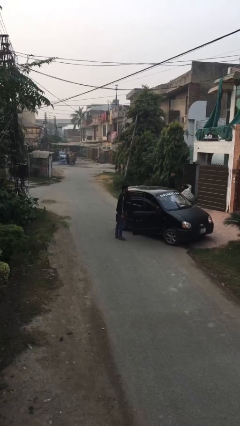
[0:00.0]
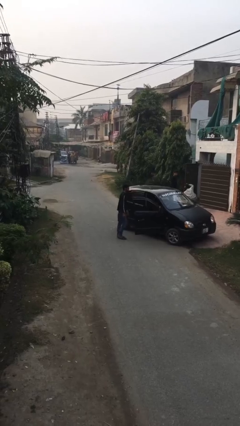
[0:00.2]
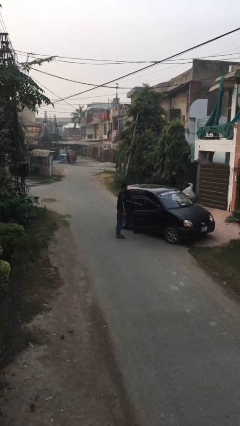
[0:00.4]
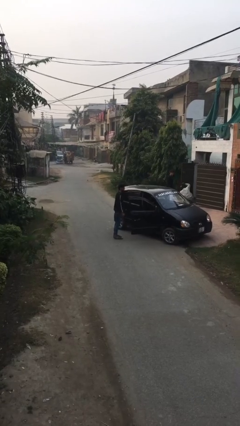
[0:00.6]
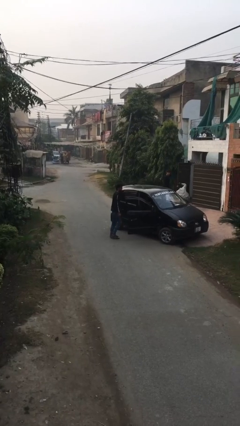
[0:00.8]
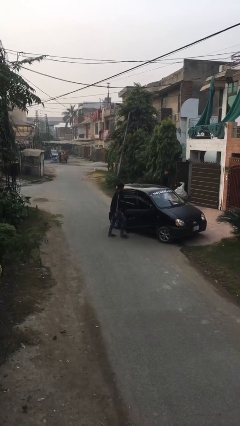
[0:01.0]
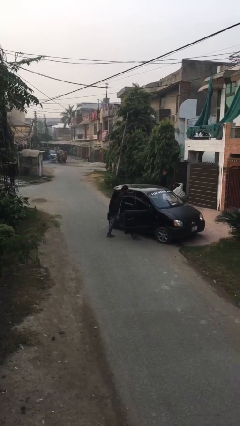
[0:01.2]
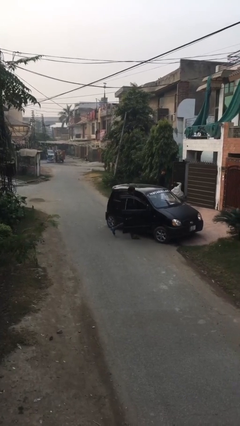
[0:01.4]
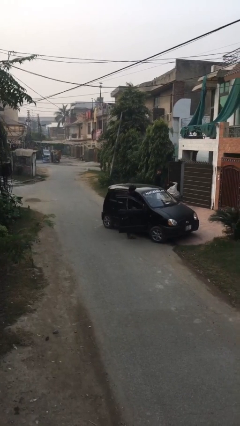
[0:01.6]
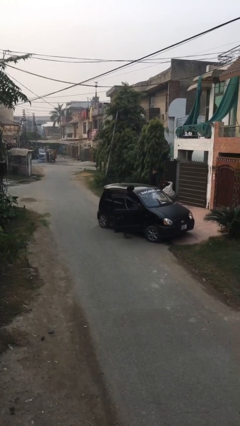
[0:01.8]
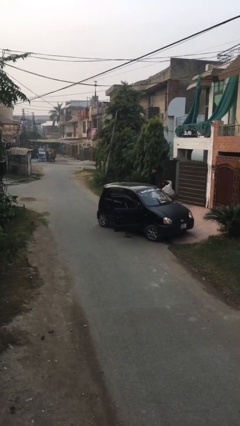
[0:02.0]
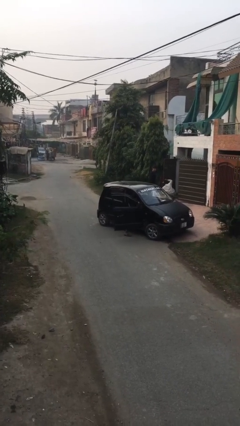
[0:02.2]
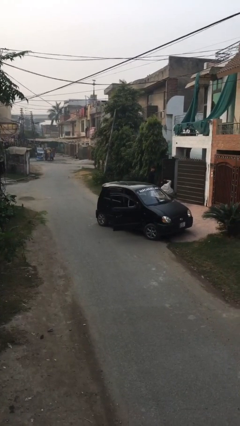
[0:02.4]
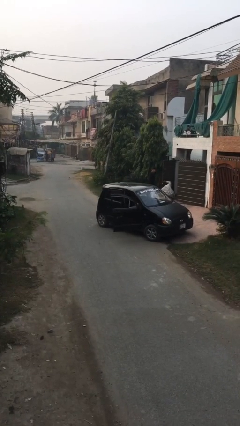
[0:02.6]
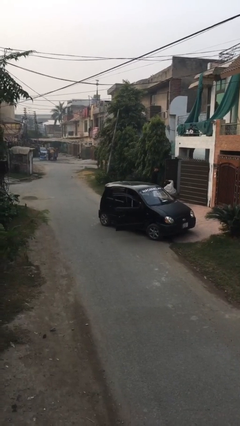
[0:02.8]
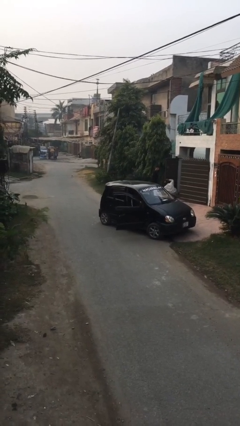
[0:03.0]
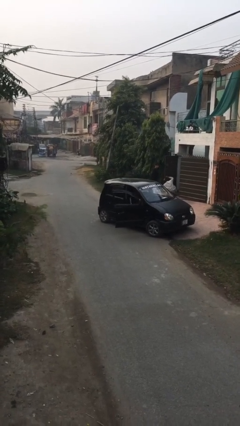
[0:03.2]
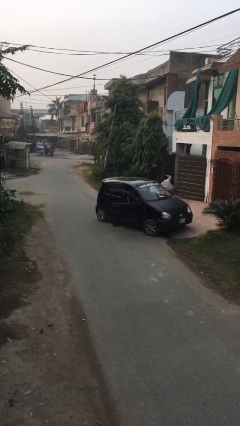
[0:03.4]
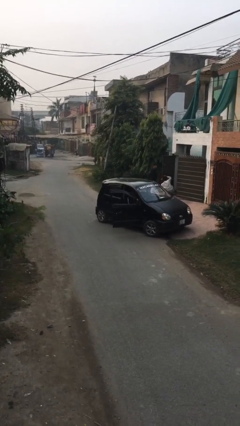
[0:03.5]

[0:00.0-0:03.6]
person enters car

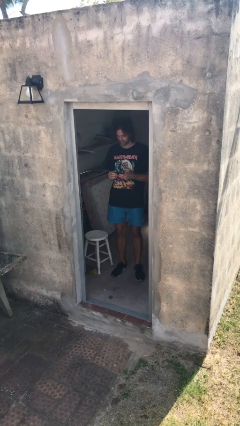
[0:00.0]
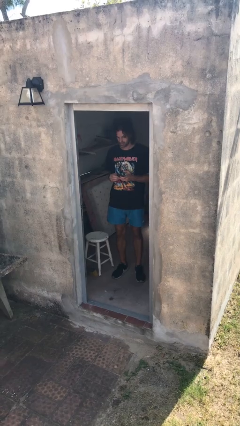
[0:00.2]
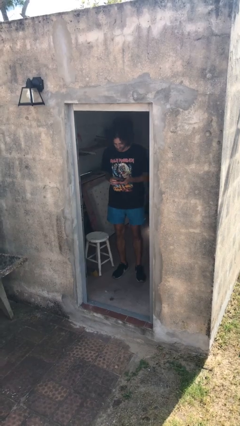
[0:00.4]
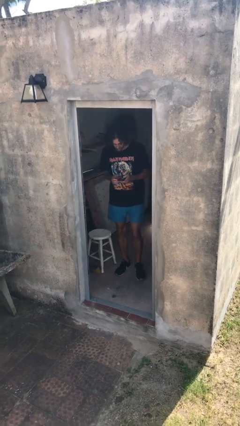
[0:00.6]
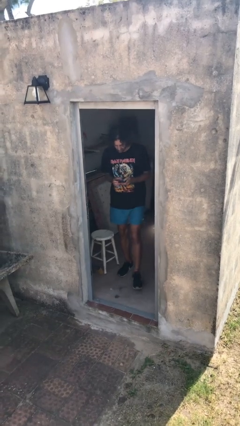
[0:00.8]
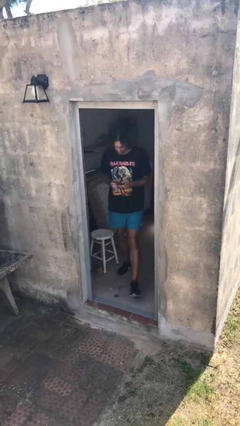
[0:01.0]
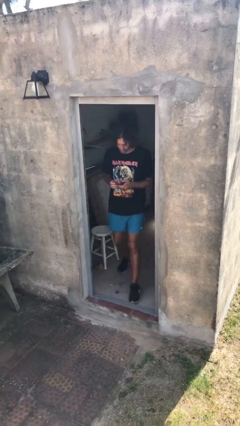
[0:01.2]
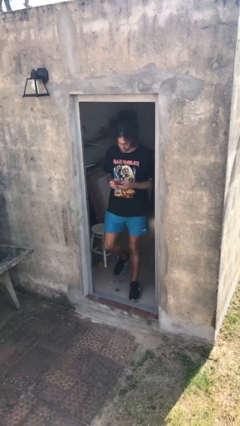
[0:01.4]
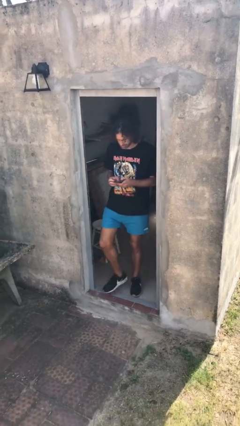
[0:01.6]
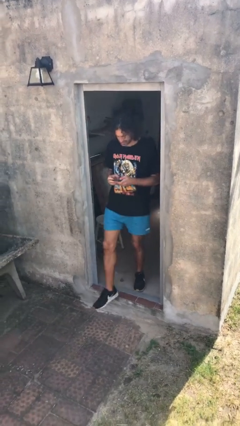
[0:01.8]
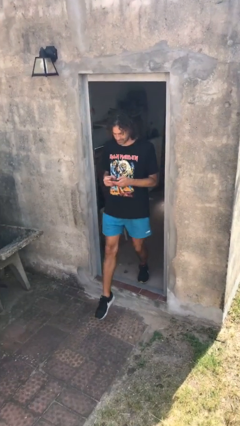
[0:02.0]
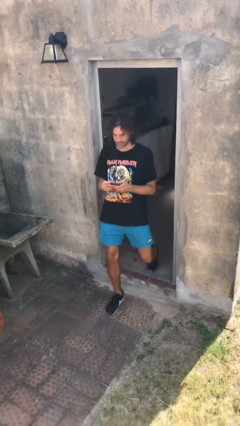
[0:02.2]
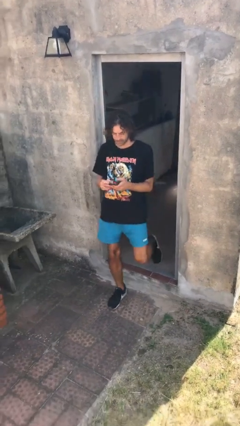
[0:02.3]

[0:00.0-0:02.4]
person enters scene through structure

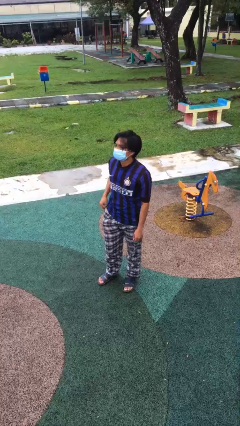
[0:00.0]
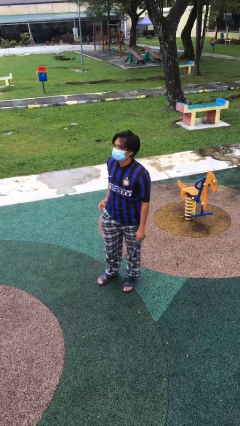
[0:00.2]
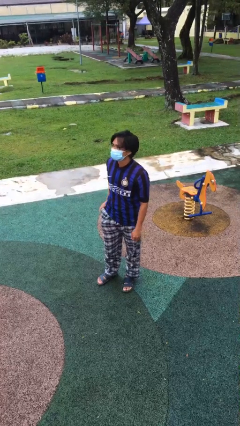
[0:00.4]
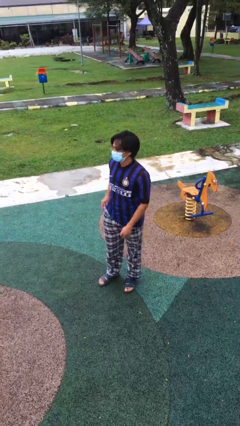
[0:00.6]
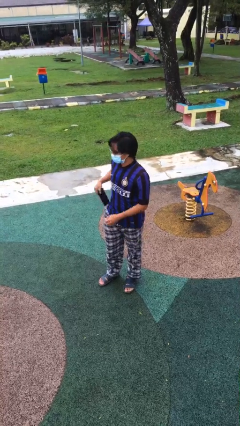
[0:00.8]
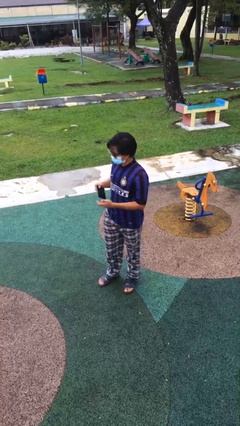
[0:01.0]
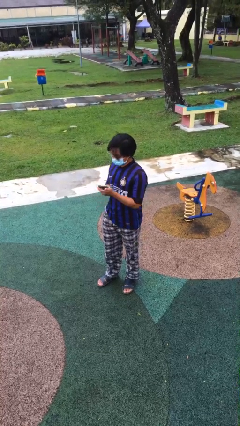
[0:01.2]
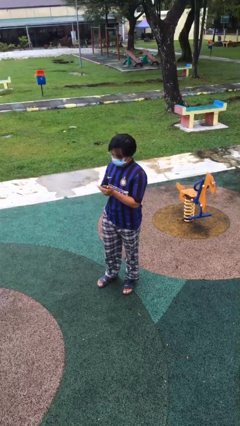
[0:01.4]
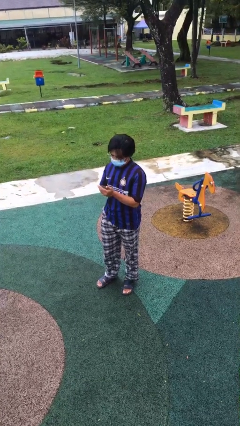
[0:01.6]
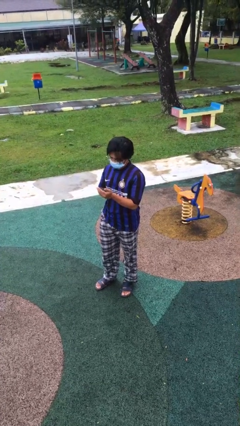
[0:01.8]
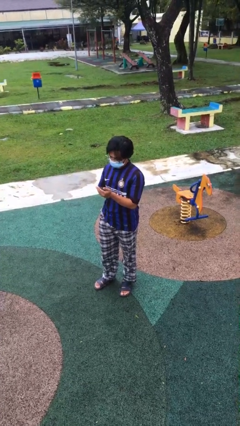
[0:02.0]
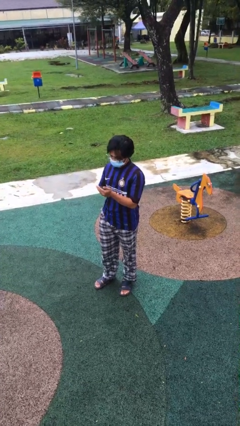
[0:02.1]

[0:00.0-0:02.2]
person takes phone from pocket

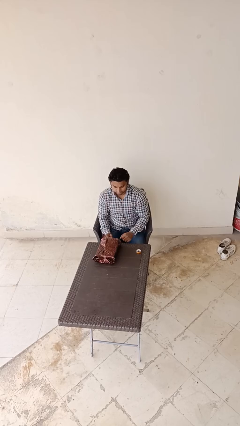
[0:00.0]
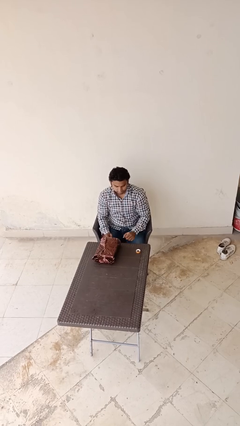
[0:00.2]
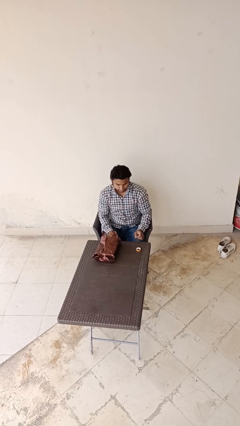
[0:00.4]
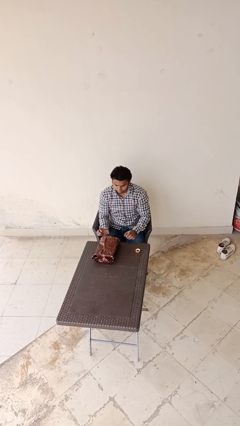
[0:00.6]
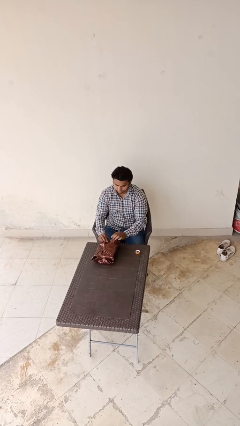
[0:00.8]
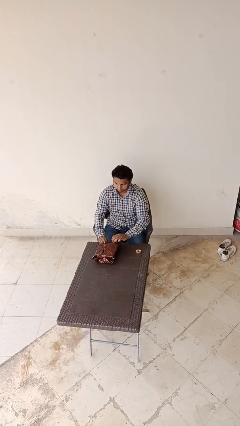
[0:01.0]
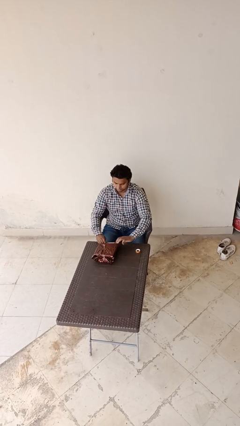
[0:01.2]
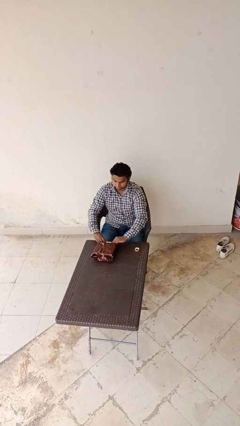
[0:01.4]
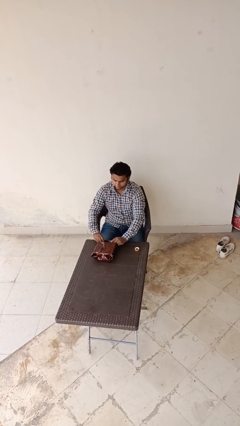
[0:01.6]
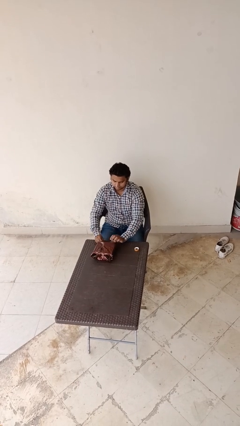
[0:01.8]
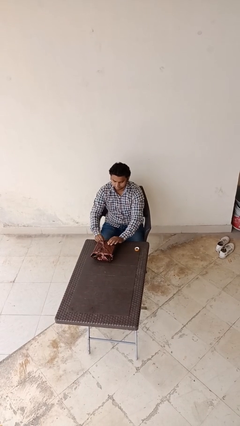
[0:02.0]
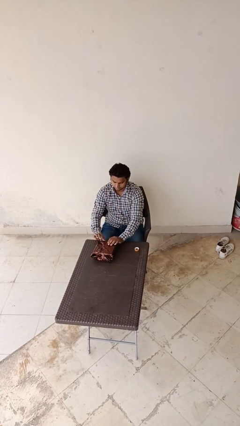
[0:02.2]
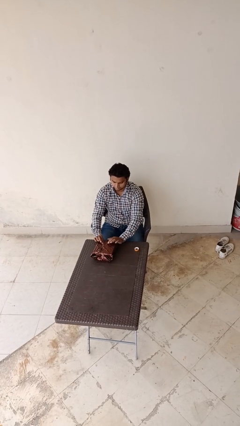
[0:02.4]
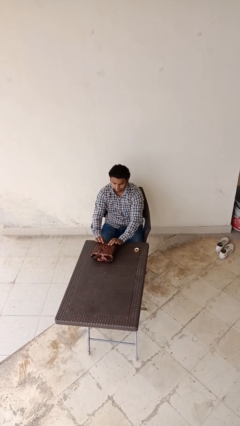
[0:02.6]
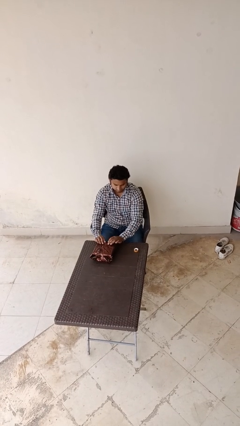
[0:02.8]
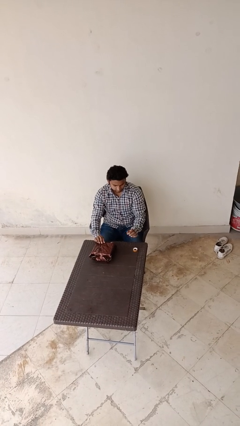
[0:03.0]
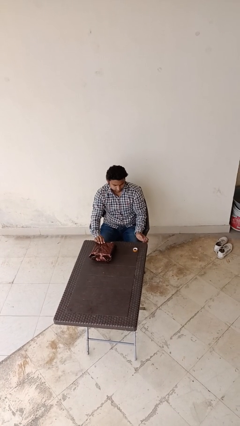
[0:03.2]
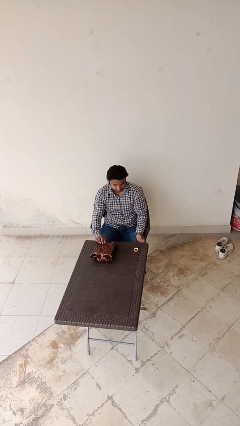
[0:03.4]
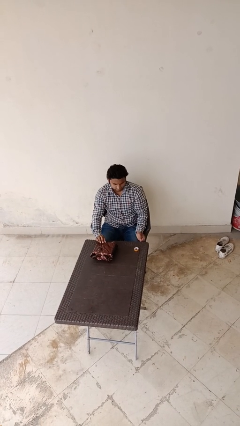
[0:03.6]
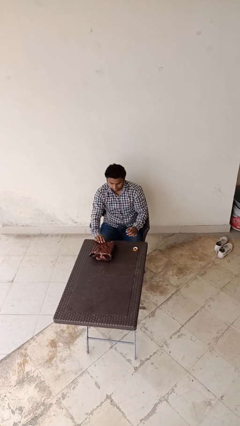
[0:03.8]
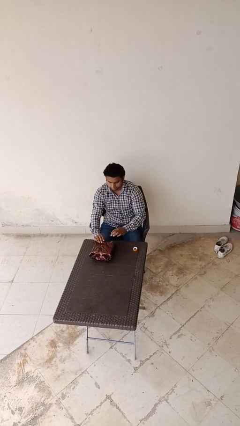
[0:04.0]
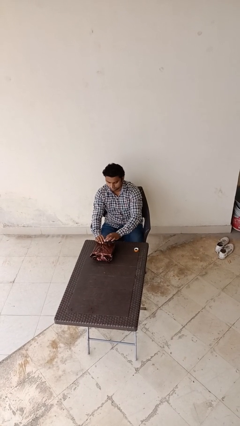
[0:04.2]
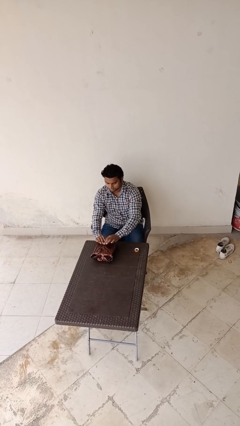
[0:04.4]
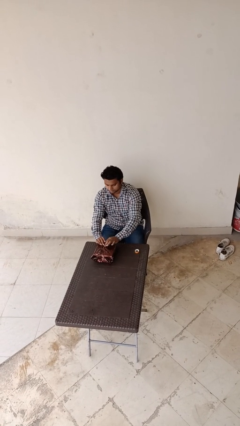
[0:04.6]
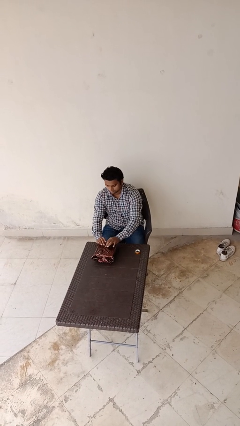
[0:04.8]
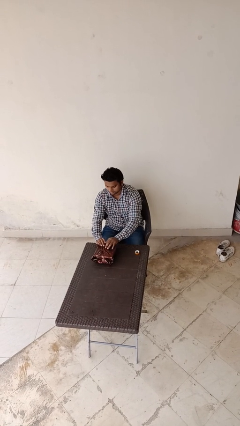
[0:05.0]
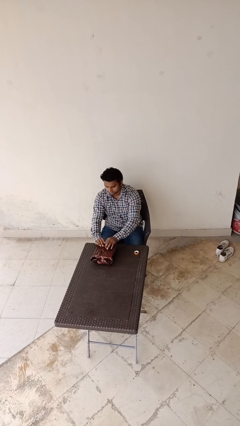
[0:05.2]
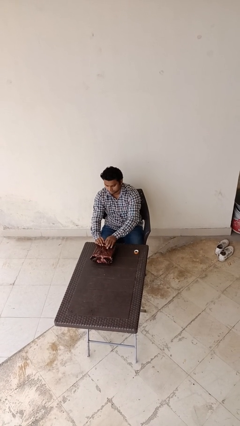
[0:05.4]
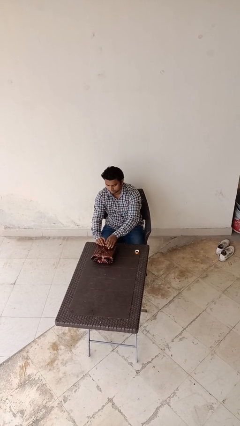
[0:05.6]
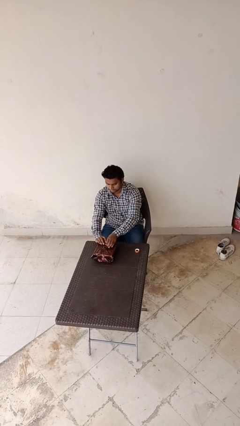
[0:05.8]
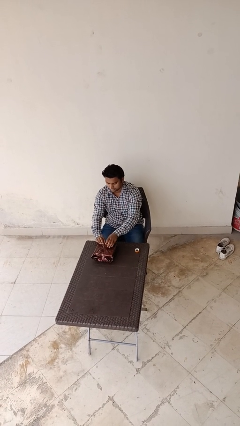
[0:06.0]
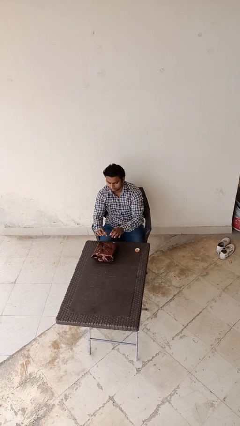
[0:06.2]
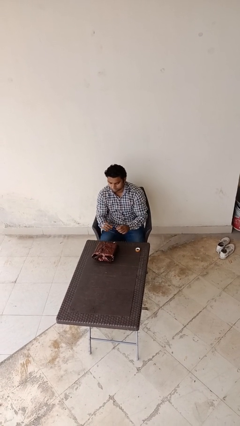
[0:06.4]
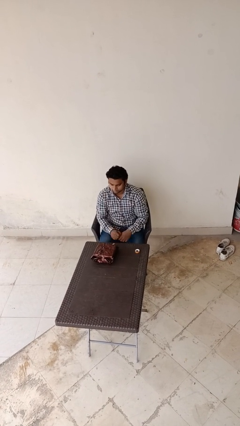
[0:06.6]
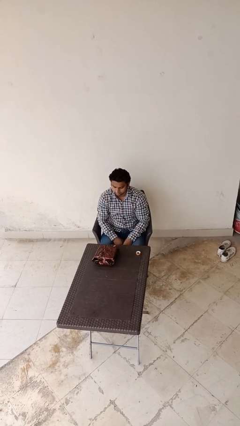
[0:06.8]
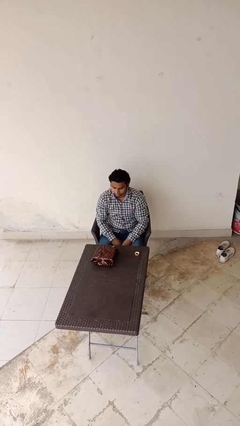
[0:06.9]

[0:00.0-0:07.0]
person wraps box

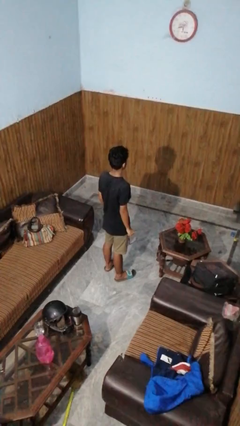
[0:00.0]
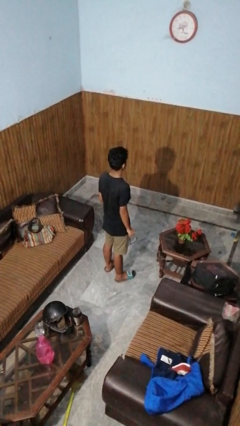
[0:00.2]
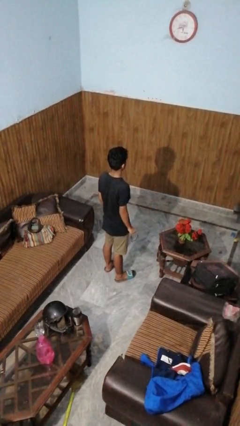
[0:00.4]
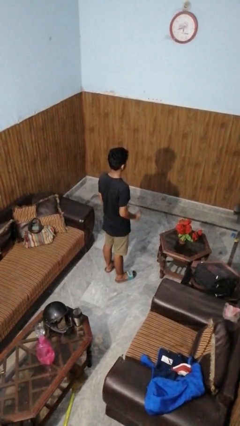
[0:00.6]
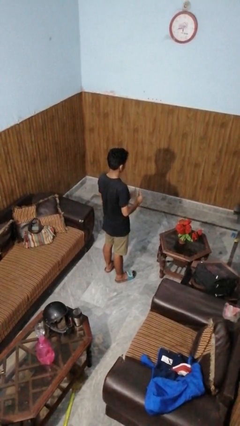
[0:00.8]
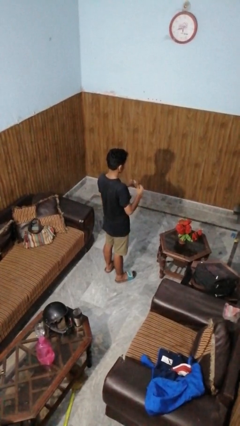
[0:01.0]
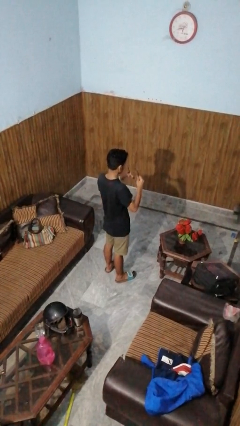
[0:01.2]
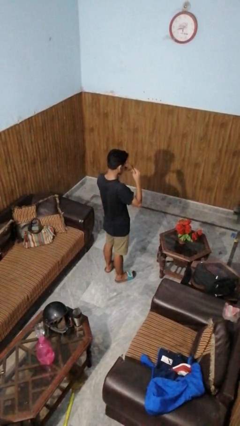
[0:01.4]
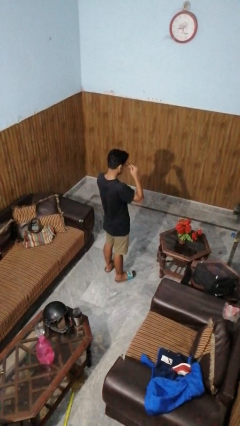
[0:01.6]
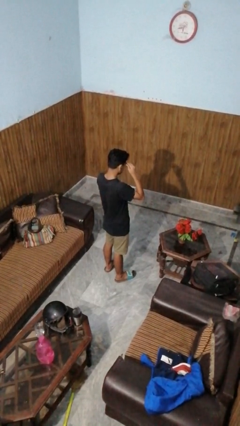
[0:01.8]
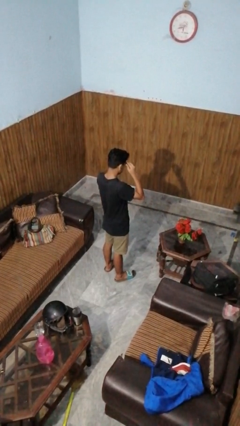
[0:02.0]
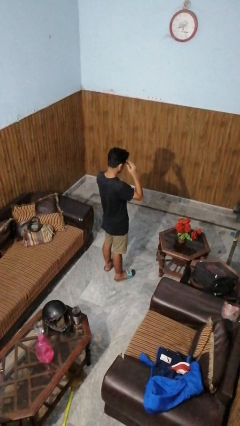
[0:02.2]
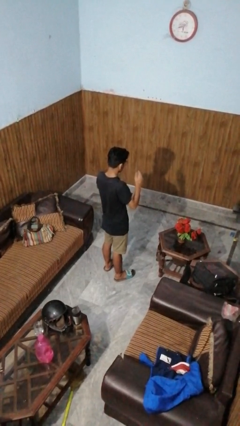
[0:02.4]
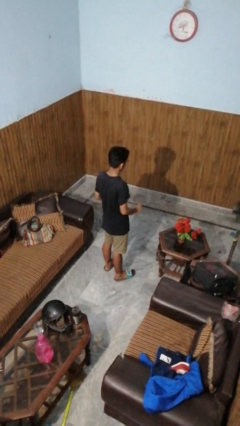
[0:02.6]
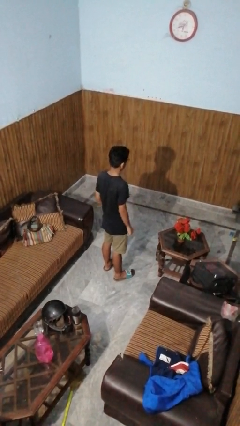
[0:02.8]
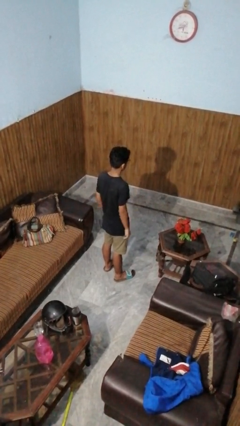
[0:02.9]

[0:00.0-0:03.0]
person puts on glasses
